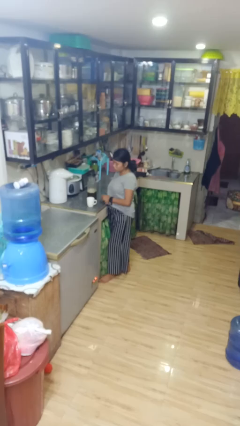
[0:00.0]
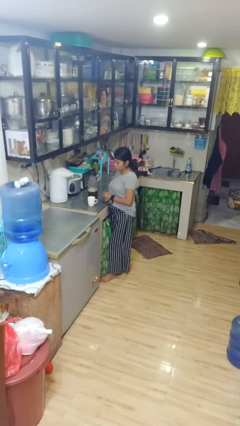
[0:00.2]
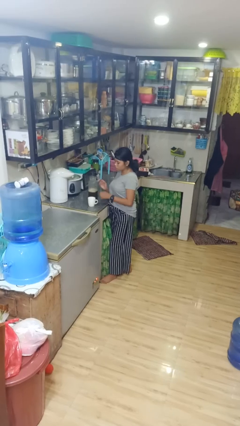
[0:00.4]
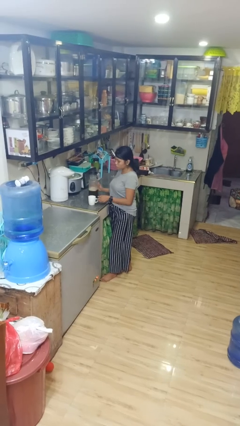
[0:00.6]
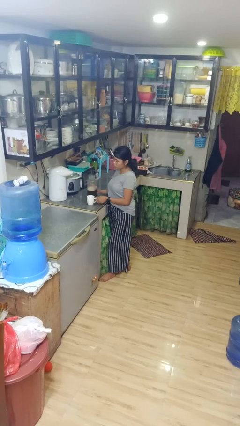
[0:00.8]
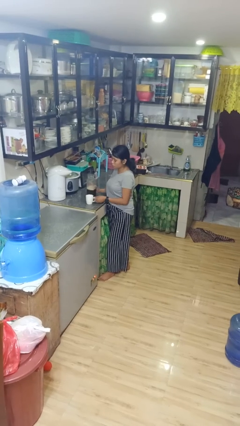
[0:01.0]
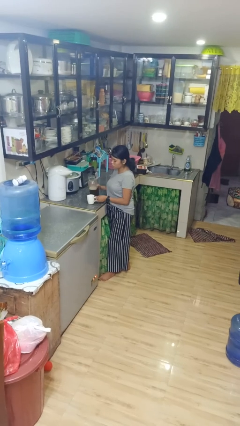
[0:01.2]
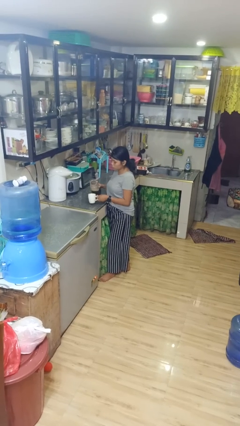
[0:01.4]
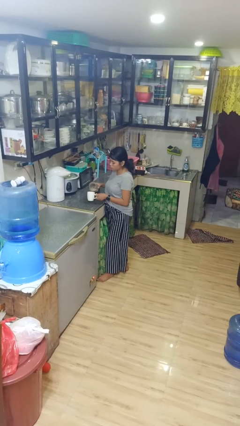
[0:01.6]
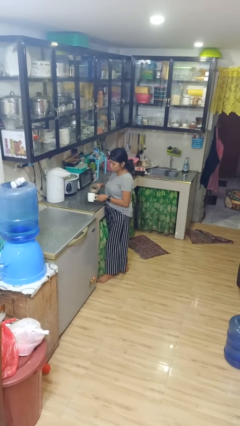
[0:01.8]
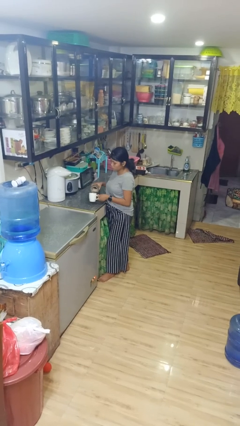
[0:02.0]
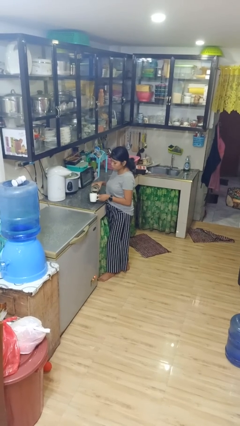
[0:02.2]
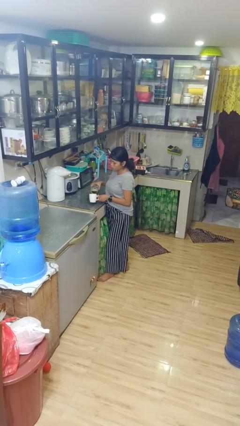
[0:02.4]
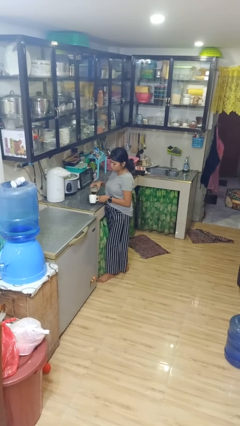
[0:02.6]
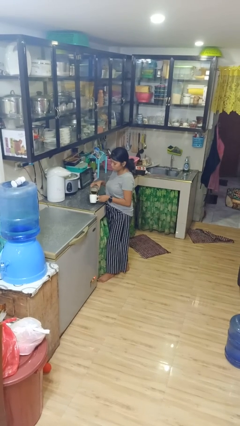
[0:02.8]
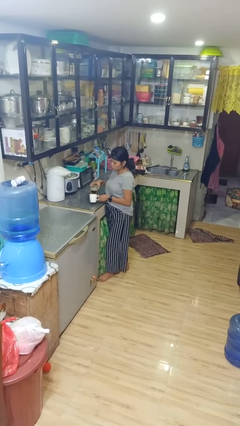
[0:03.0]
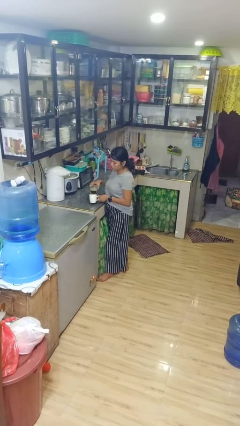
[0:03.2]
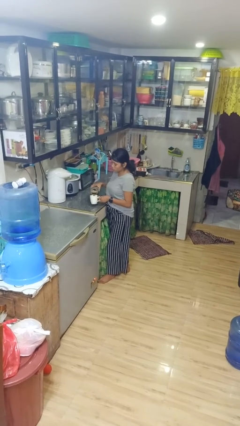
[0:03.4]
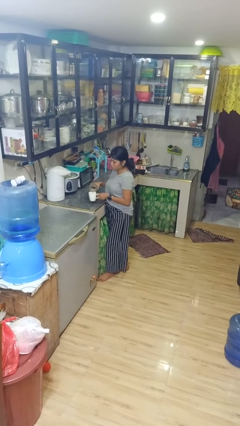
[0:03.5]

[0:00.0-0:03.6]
person pours coffee into mug

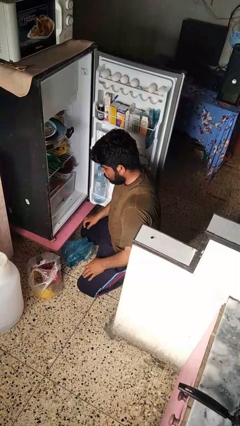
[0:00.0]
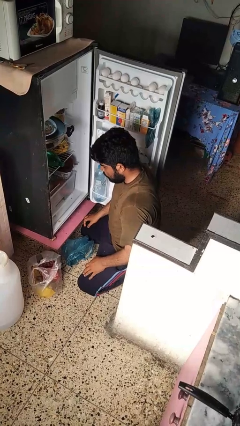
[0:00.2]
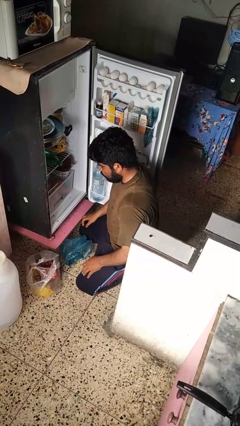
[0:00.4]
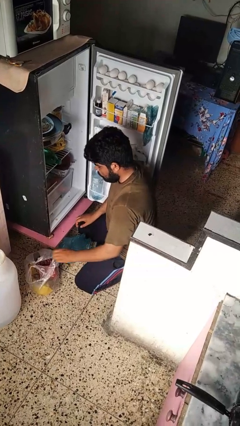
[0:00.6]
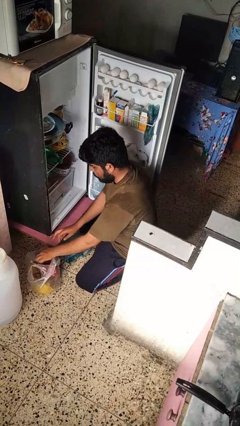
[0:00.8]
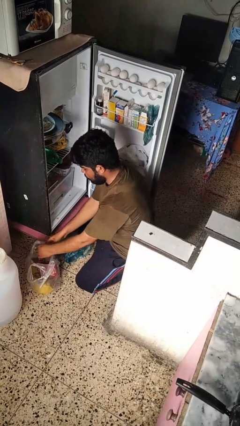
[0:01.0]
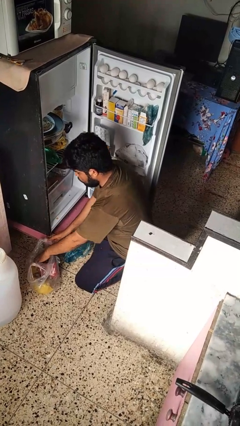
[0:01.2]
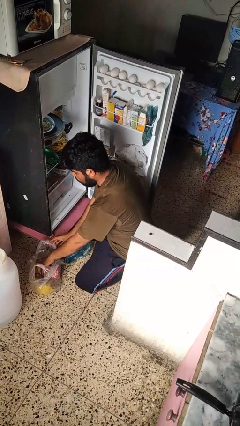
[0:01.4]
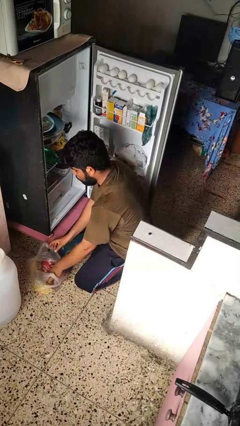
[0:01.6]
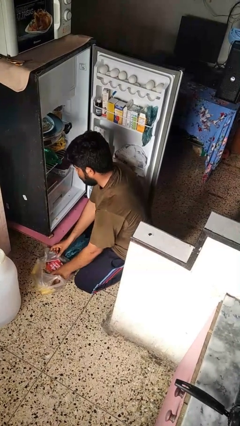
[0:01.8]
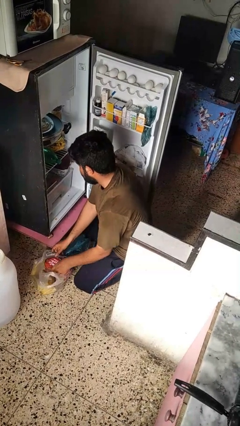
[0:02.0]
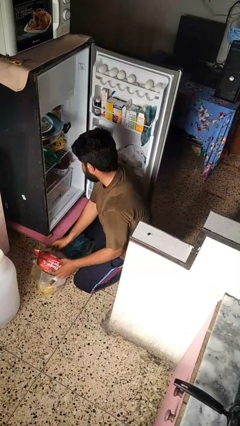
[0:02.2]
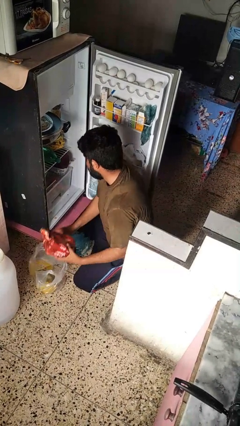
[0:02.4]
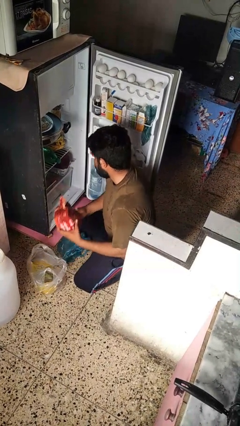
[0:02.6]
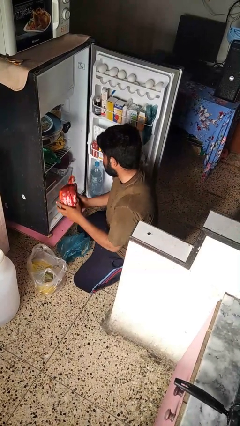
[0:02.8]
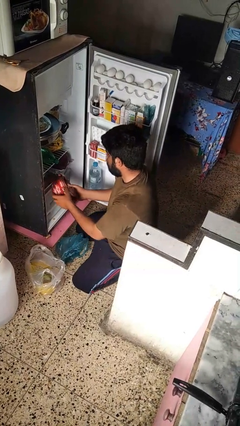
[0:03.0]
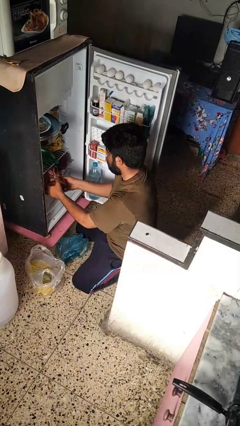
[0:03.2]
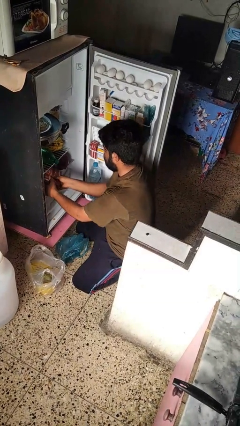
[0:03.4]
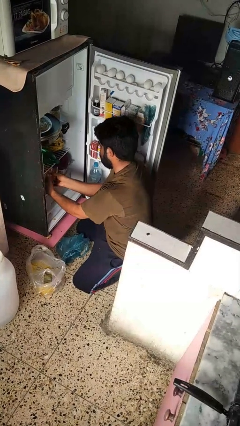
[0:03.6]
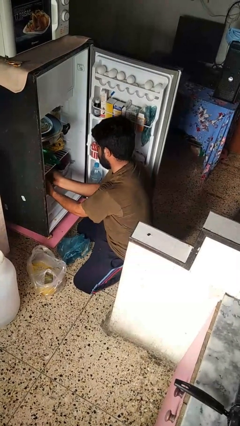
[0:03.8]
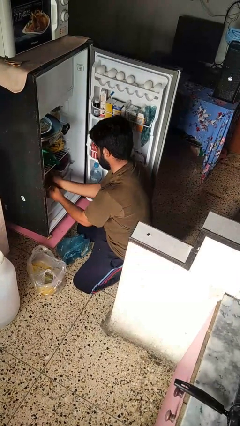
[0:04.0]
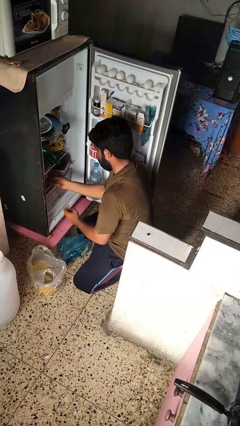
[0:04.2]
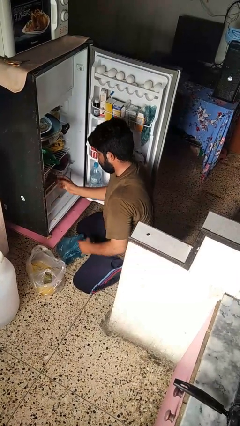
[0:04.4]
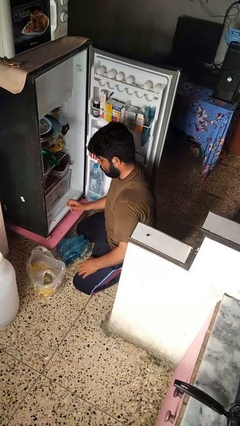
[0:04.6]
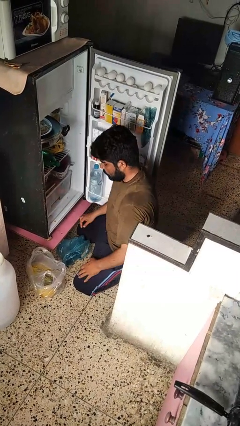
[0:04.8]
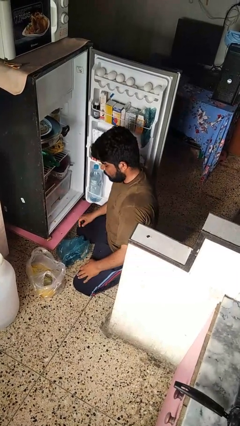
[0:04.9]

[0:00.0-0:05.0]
person loads groceries into refrigerator

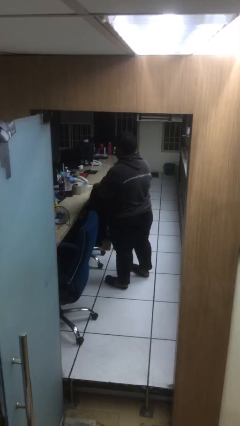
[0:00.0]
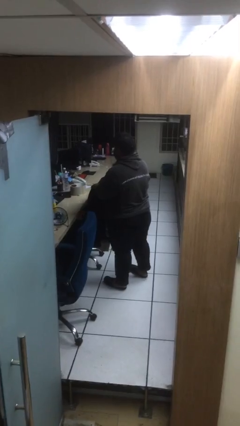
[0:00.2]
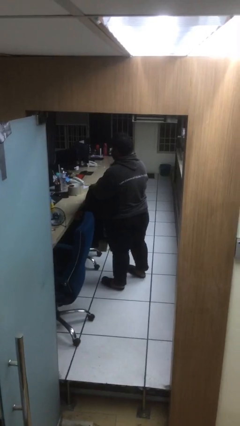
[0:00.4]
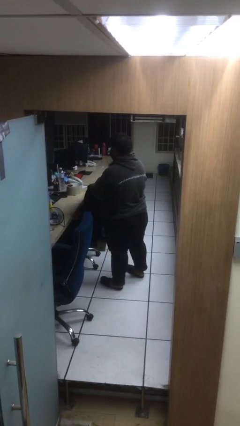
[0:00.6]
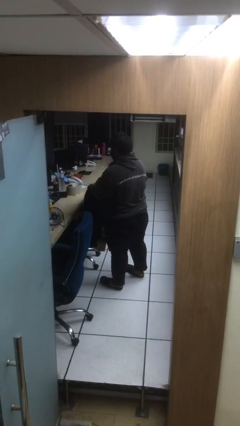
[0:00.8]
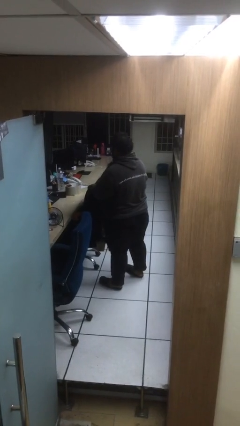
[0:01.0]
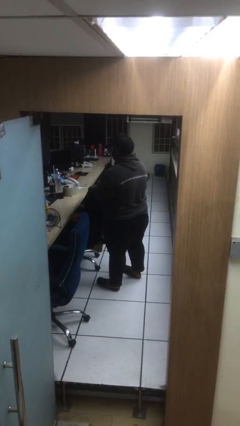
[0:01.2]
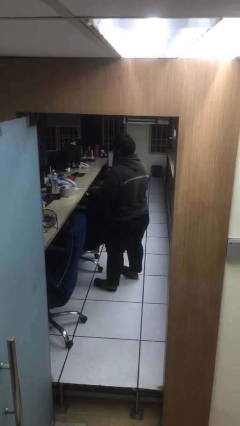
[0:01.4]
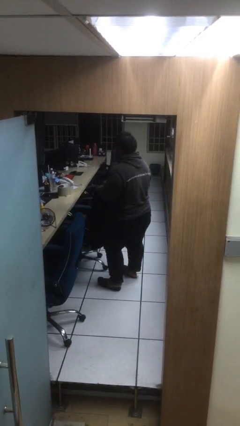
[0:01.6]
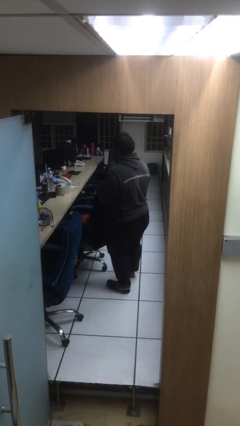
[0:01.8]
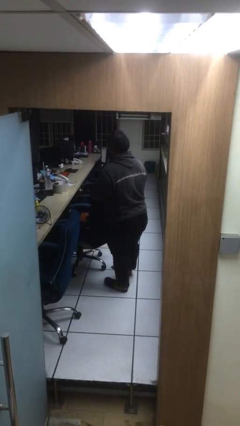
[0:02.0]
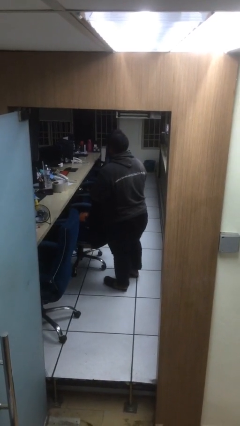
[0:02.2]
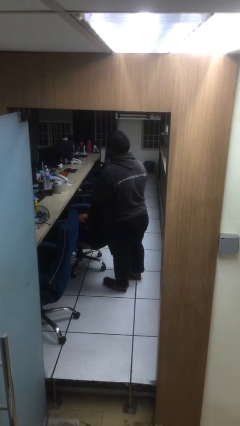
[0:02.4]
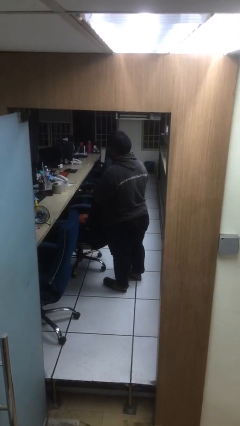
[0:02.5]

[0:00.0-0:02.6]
person pulls out chair

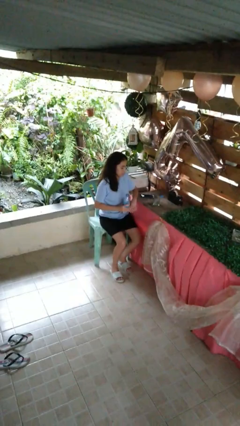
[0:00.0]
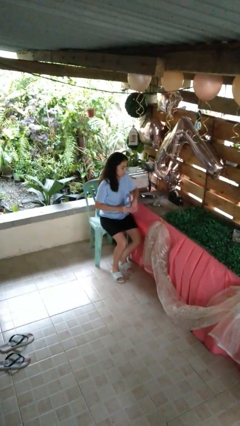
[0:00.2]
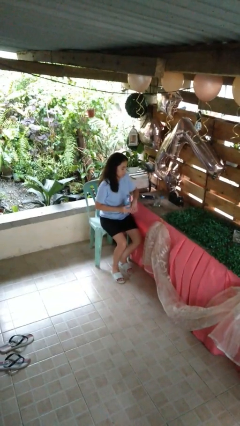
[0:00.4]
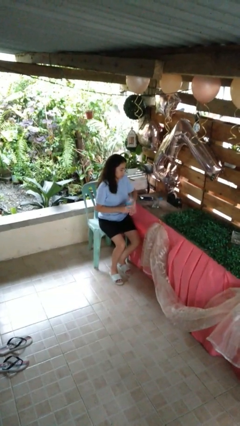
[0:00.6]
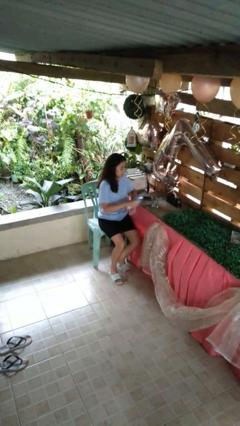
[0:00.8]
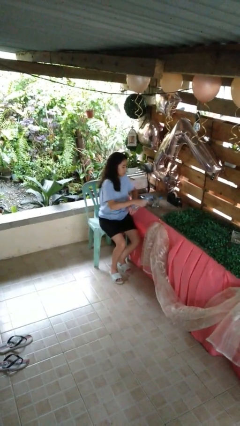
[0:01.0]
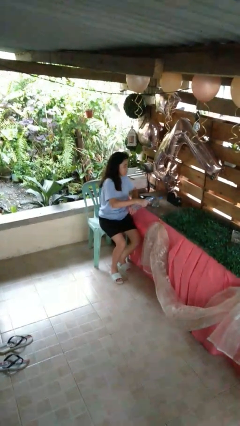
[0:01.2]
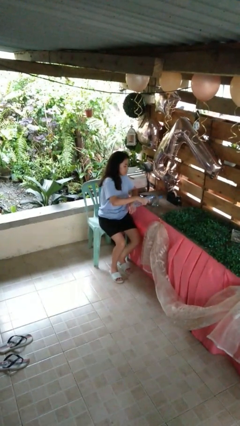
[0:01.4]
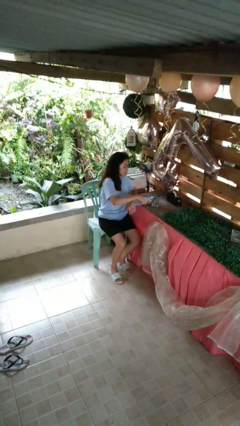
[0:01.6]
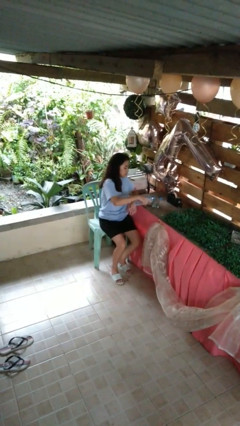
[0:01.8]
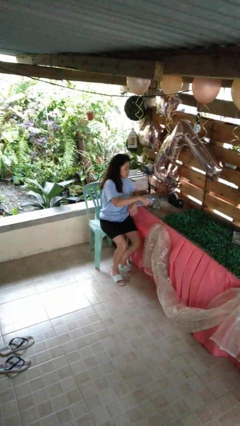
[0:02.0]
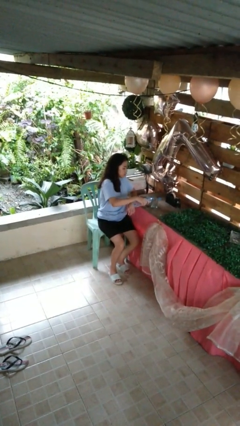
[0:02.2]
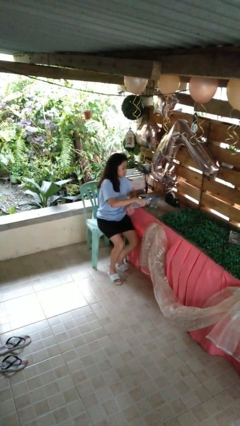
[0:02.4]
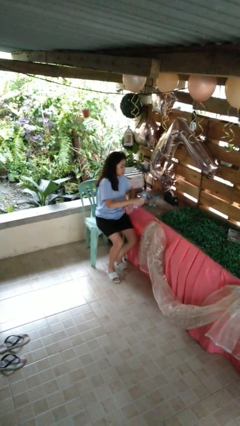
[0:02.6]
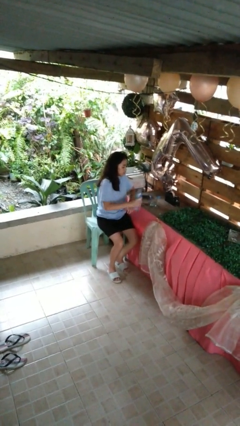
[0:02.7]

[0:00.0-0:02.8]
person pours liquid into cup

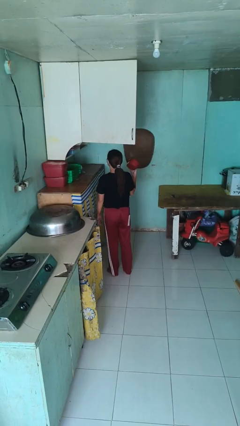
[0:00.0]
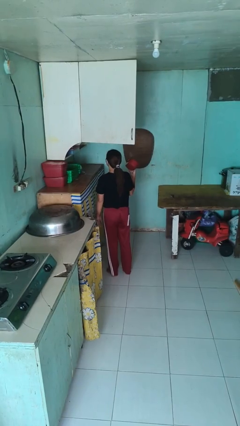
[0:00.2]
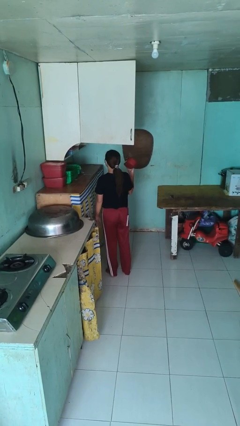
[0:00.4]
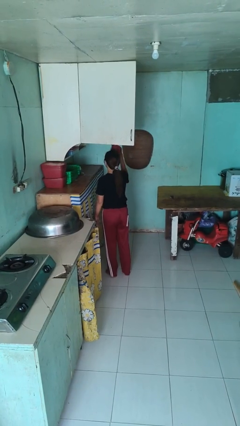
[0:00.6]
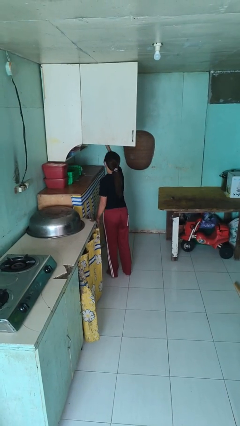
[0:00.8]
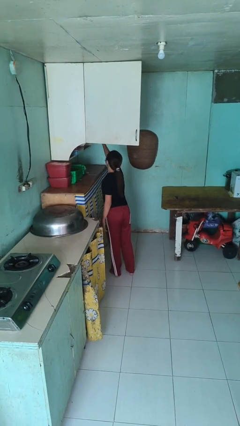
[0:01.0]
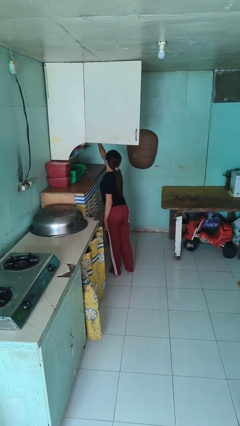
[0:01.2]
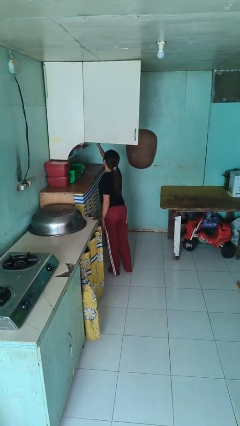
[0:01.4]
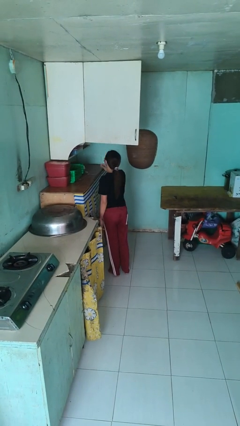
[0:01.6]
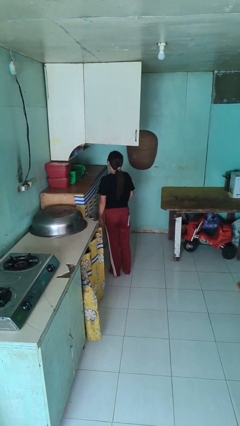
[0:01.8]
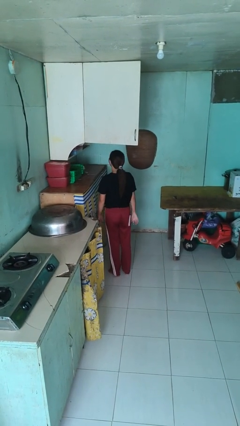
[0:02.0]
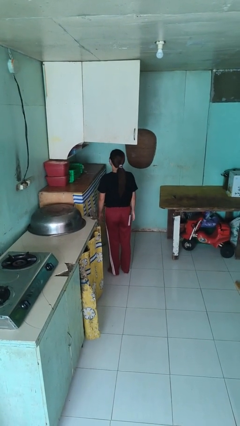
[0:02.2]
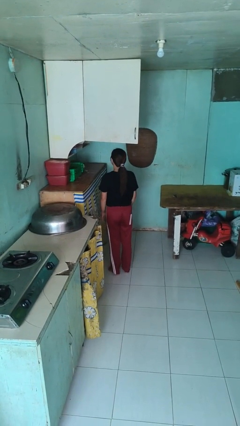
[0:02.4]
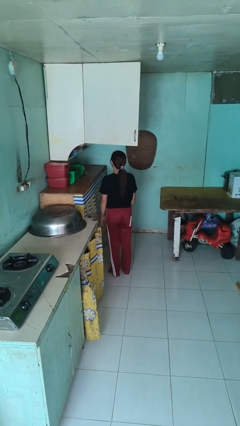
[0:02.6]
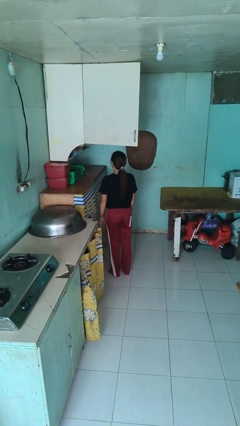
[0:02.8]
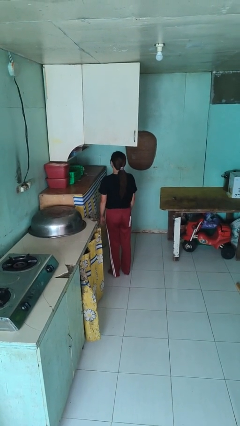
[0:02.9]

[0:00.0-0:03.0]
person puts object in cabinet

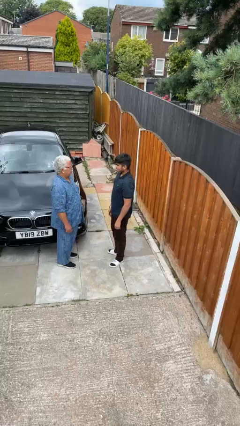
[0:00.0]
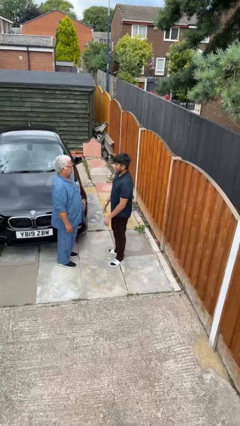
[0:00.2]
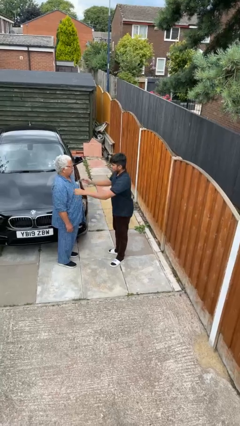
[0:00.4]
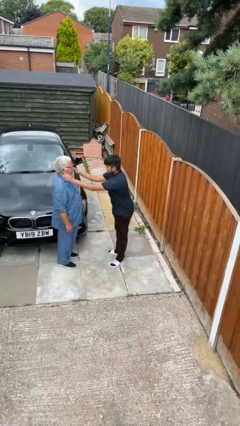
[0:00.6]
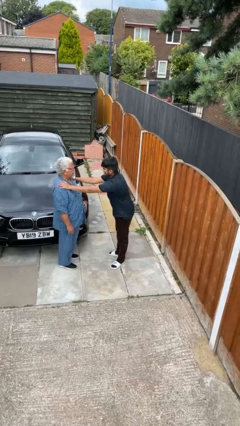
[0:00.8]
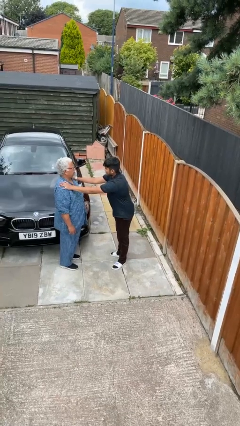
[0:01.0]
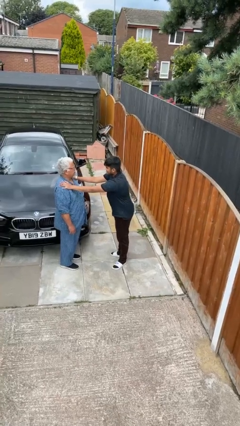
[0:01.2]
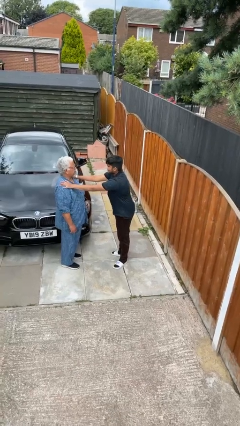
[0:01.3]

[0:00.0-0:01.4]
person pounds shoulders of person
